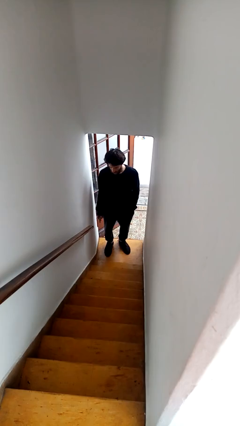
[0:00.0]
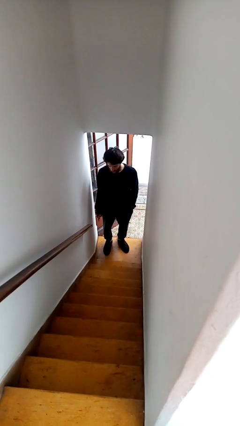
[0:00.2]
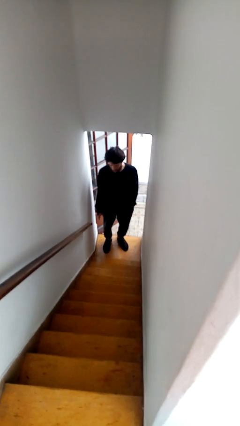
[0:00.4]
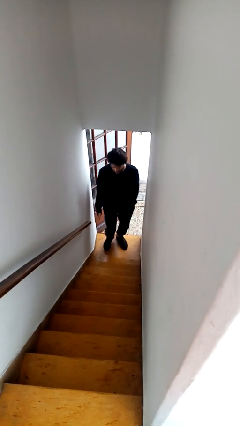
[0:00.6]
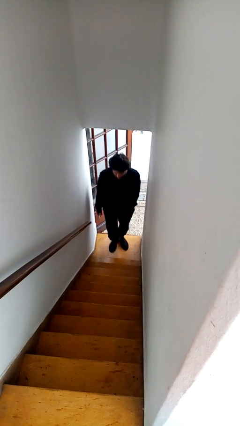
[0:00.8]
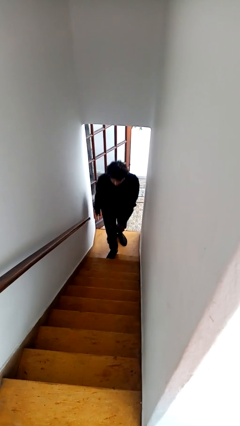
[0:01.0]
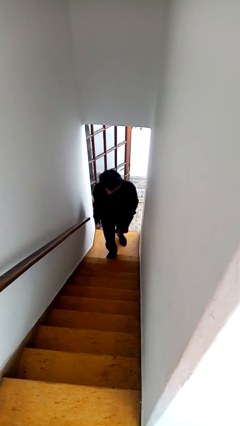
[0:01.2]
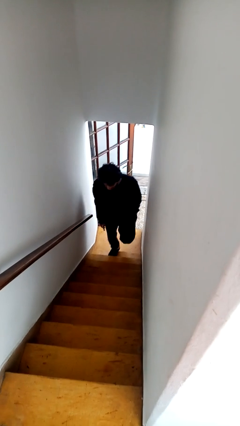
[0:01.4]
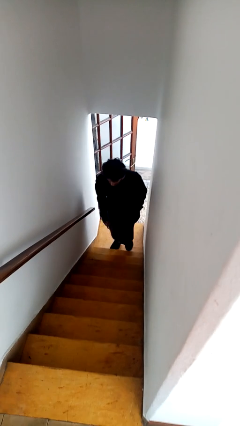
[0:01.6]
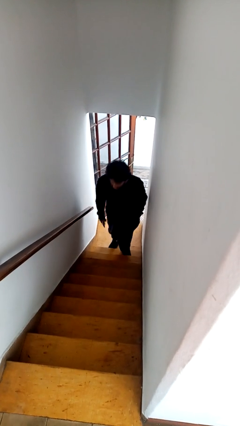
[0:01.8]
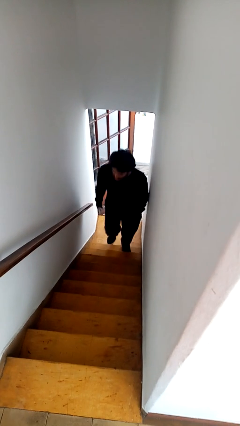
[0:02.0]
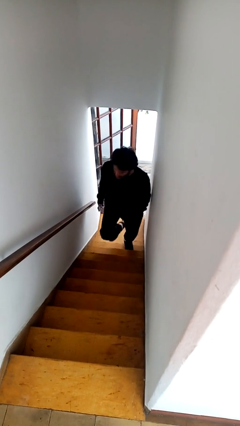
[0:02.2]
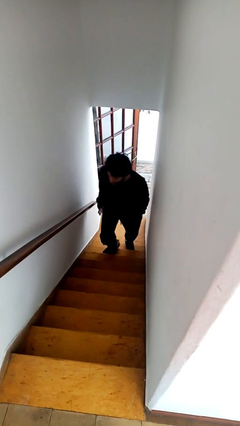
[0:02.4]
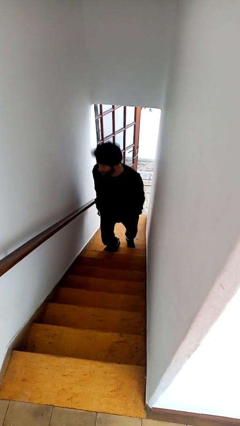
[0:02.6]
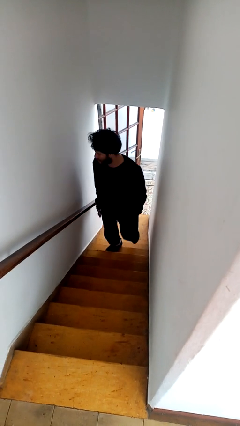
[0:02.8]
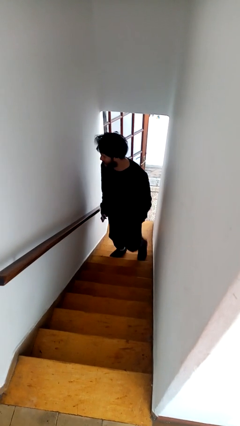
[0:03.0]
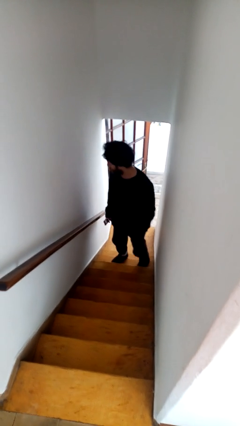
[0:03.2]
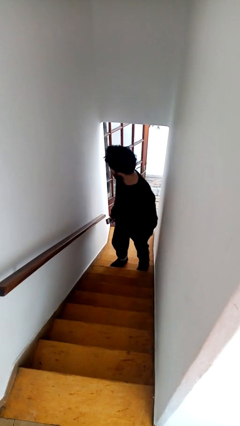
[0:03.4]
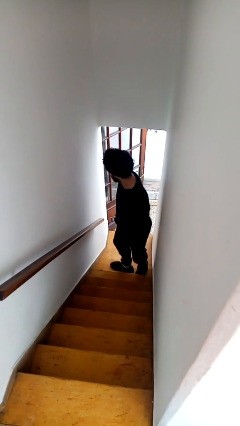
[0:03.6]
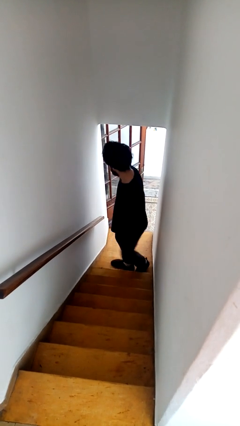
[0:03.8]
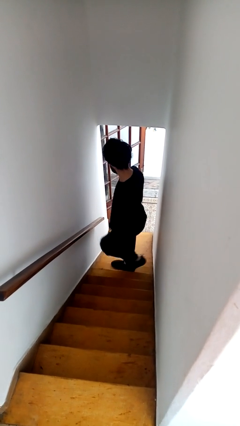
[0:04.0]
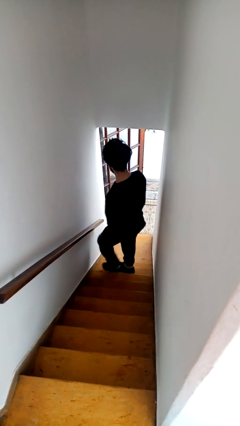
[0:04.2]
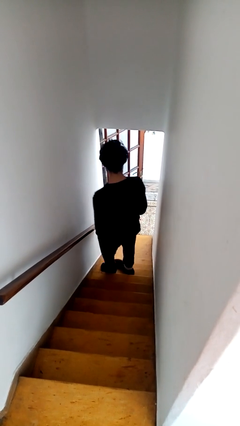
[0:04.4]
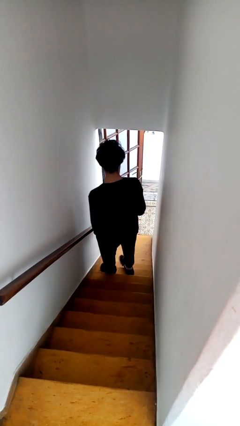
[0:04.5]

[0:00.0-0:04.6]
person climbs up stairs

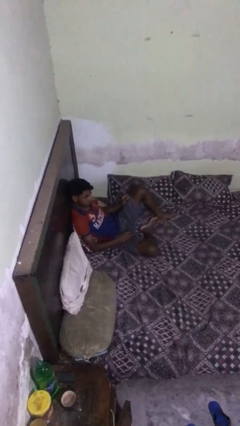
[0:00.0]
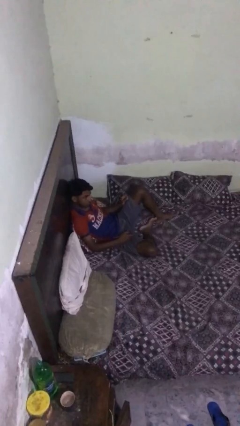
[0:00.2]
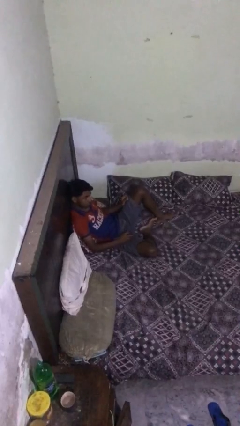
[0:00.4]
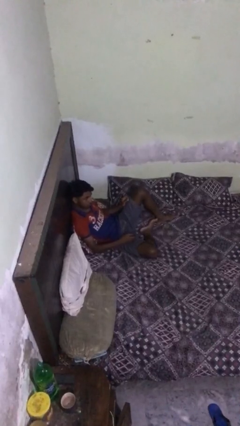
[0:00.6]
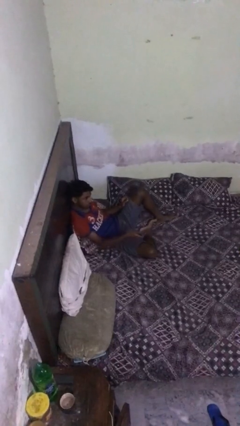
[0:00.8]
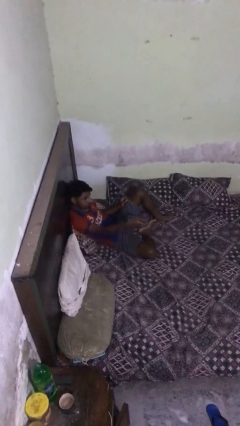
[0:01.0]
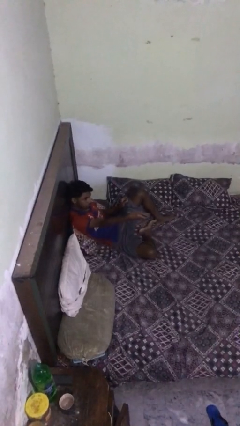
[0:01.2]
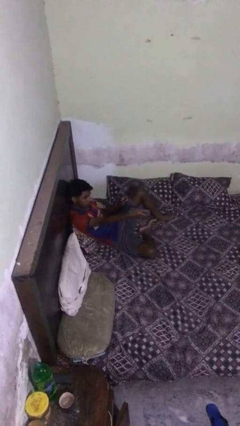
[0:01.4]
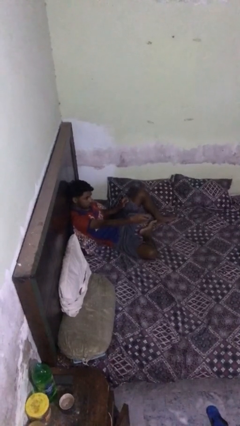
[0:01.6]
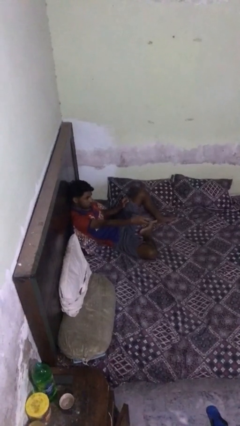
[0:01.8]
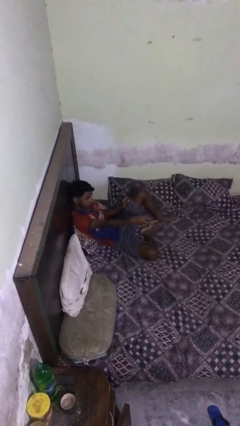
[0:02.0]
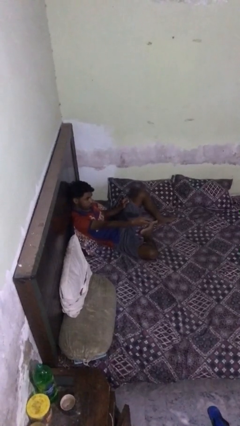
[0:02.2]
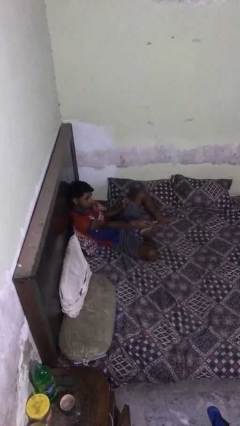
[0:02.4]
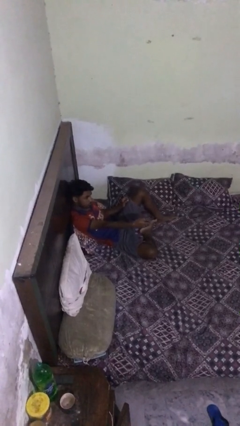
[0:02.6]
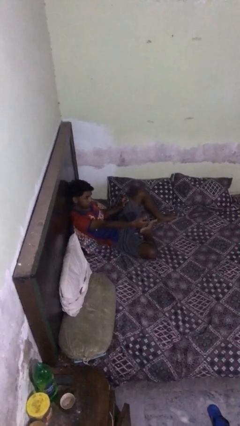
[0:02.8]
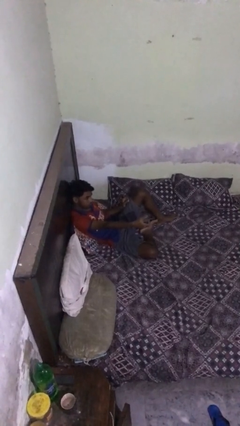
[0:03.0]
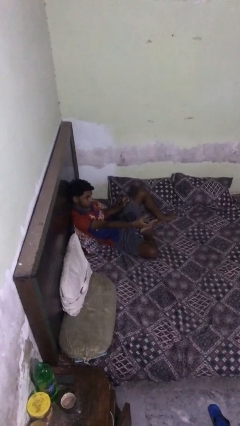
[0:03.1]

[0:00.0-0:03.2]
person uses television remote

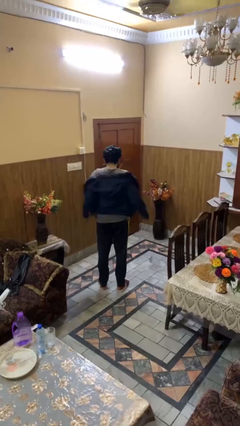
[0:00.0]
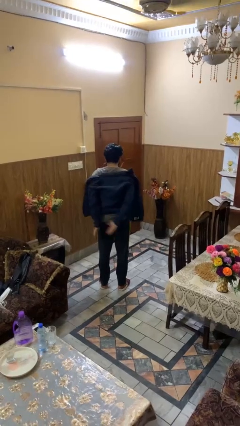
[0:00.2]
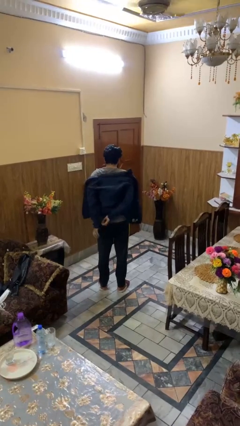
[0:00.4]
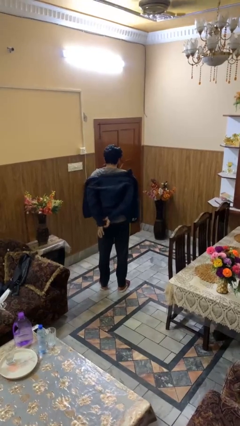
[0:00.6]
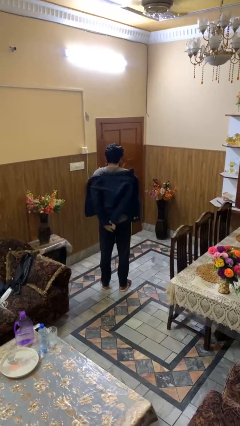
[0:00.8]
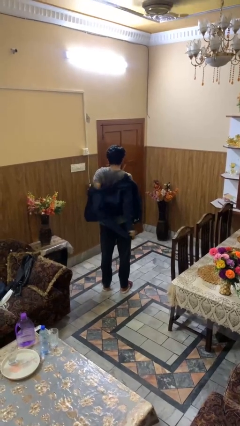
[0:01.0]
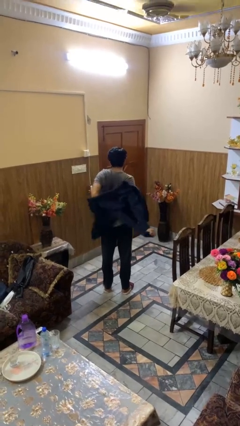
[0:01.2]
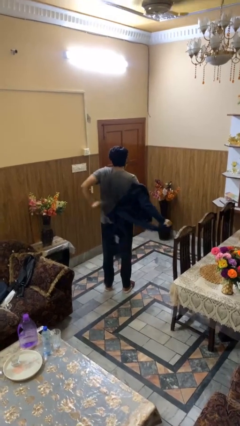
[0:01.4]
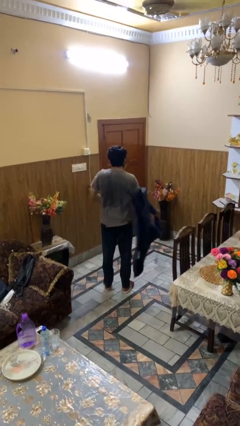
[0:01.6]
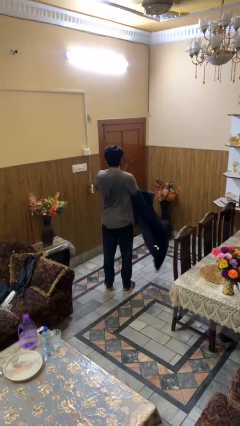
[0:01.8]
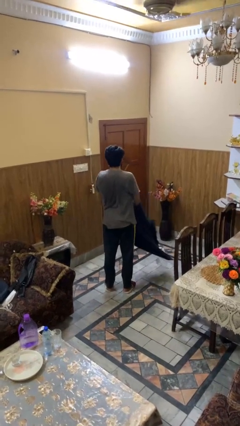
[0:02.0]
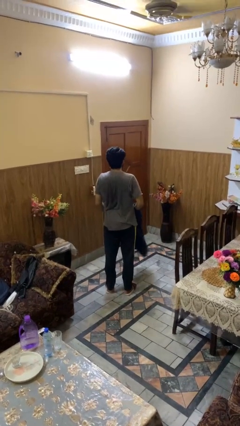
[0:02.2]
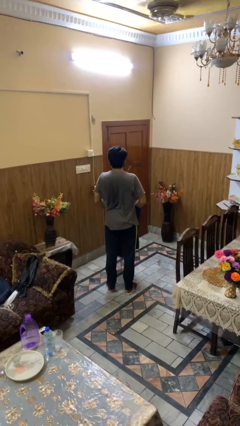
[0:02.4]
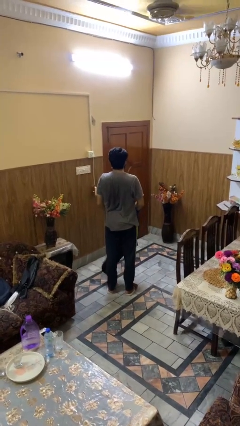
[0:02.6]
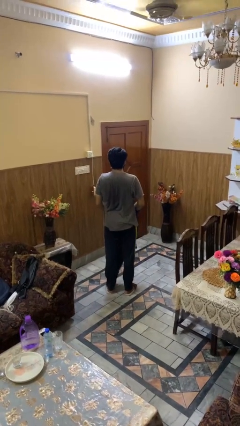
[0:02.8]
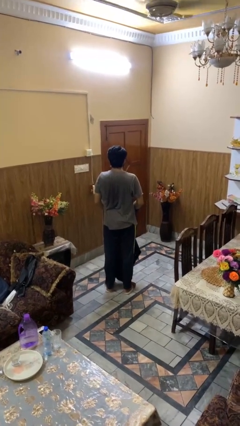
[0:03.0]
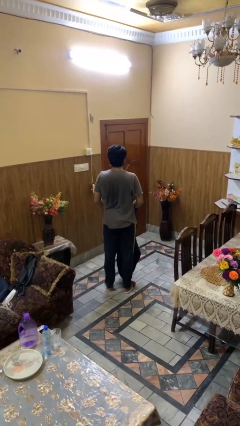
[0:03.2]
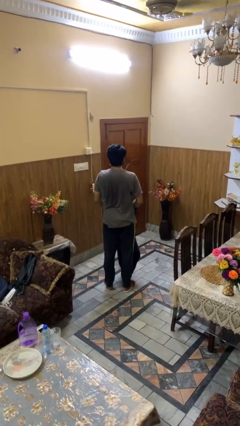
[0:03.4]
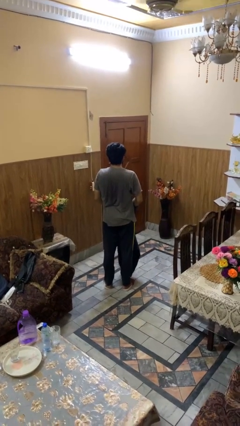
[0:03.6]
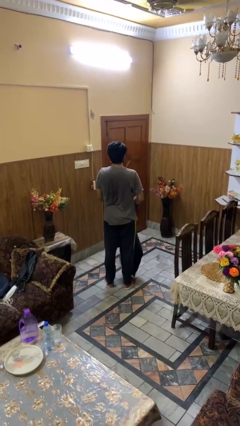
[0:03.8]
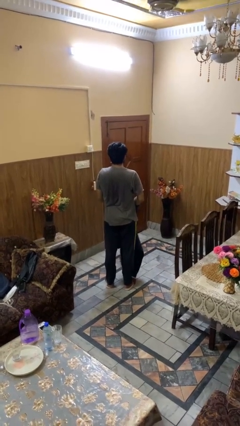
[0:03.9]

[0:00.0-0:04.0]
person takes off jacket

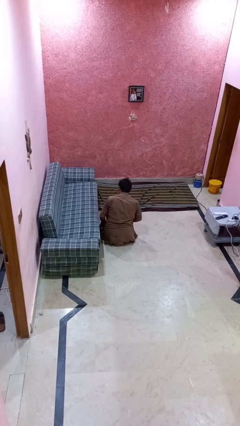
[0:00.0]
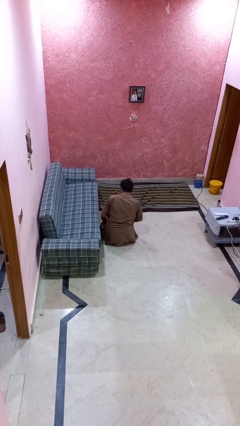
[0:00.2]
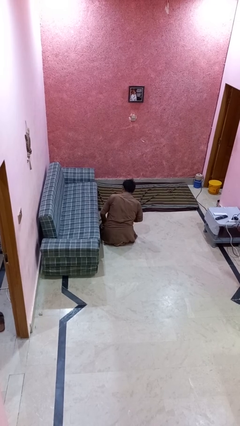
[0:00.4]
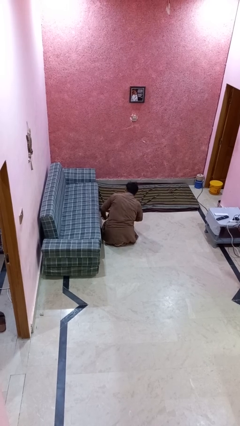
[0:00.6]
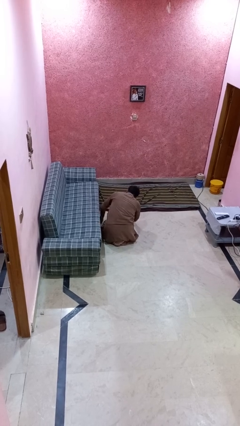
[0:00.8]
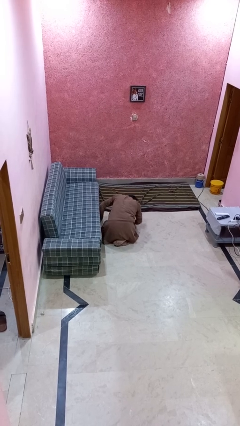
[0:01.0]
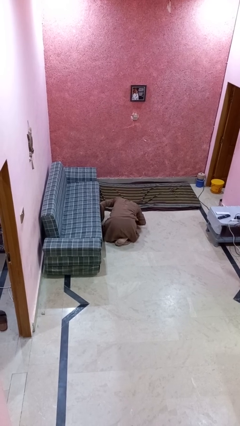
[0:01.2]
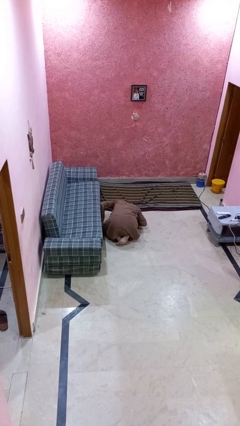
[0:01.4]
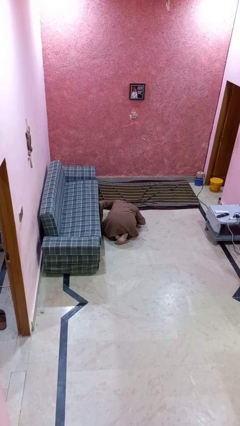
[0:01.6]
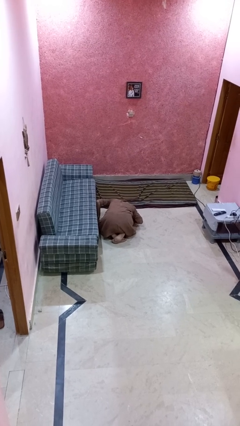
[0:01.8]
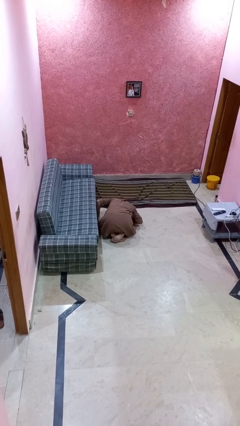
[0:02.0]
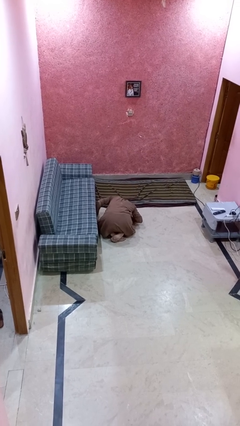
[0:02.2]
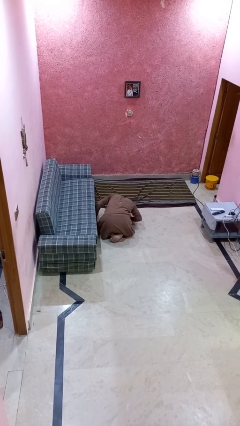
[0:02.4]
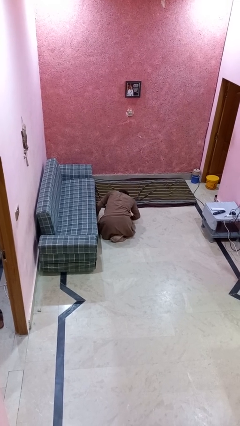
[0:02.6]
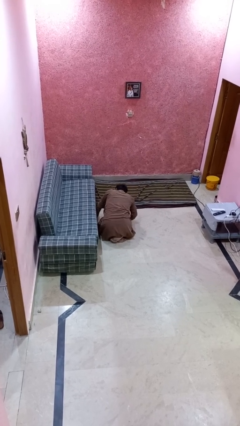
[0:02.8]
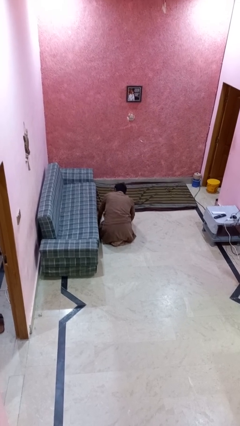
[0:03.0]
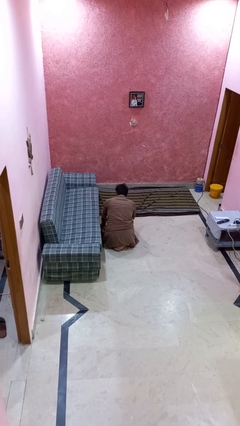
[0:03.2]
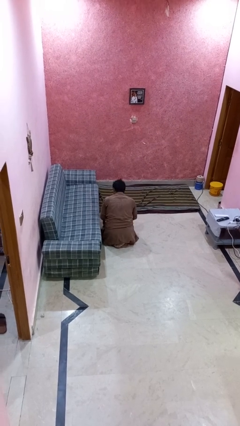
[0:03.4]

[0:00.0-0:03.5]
person searches under couch

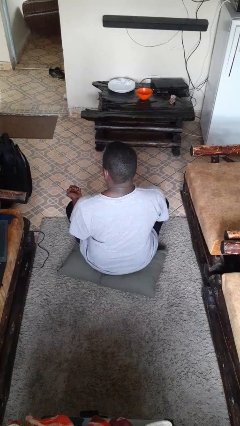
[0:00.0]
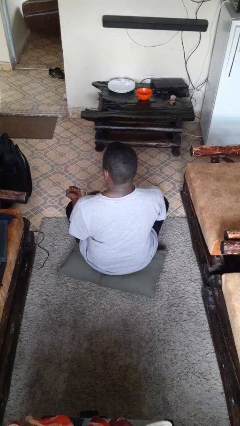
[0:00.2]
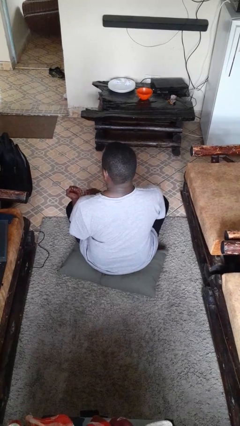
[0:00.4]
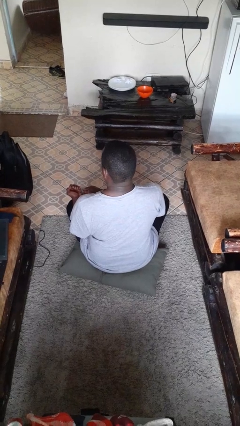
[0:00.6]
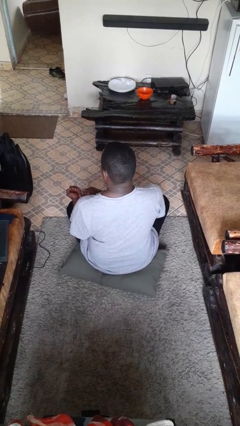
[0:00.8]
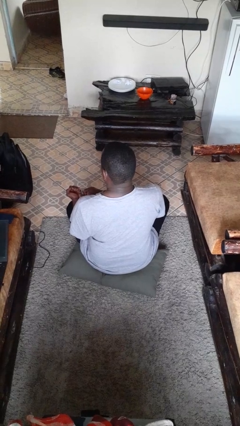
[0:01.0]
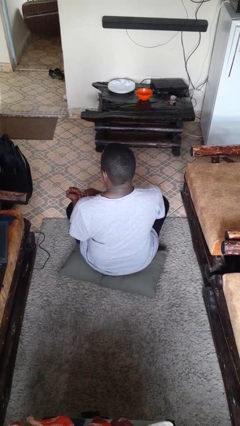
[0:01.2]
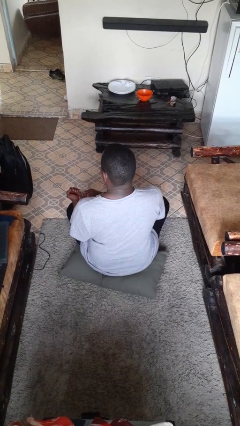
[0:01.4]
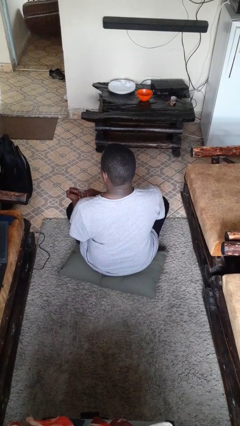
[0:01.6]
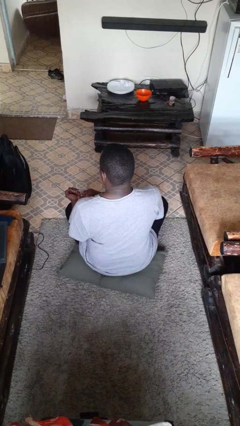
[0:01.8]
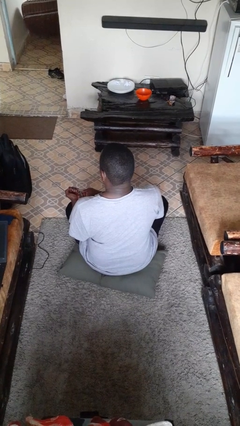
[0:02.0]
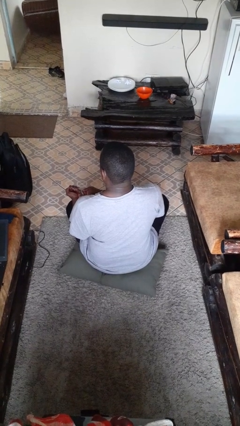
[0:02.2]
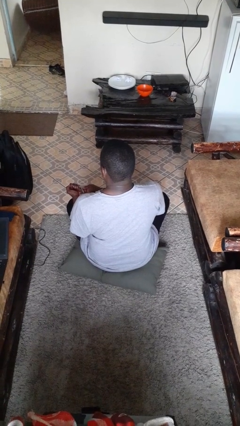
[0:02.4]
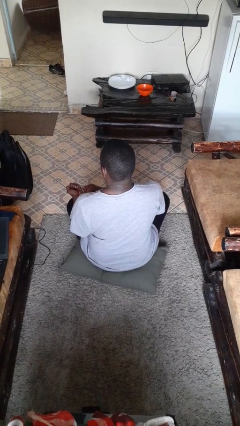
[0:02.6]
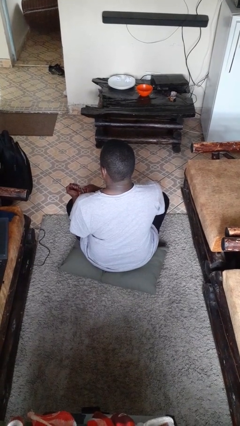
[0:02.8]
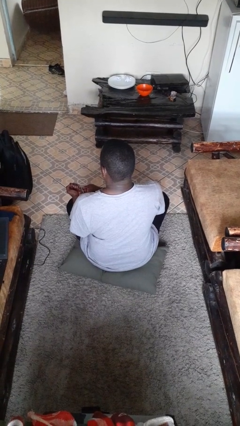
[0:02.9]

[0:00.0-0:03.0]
person clips fingernails
